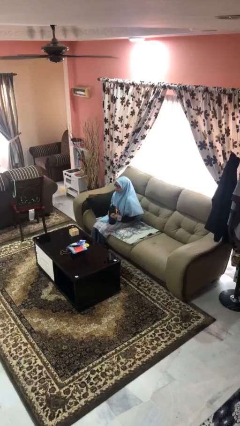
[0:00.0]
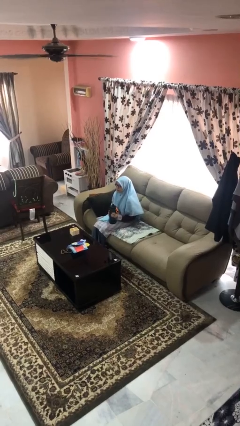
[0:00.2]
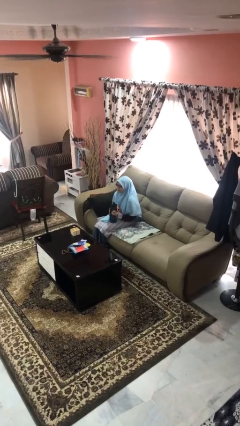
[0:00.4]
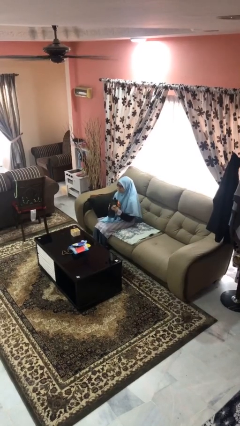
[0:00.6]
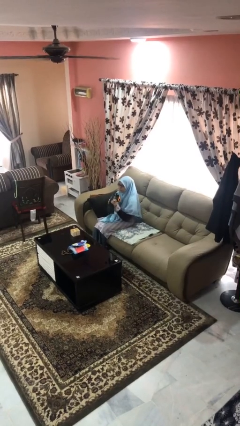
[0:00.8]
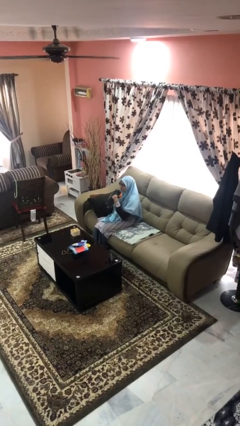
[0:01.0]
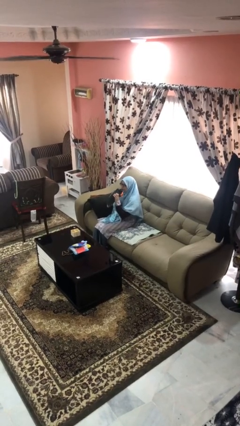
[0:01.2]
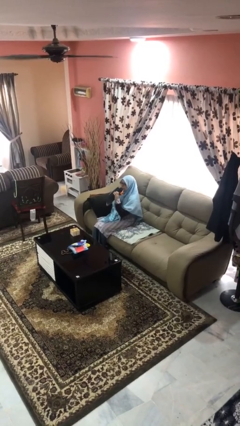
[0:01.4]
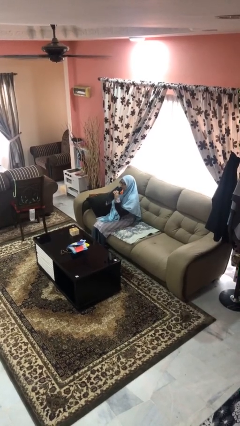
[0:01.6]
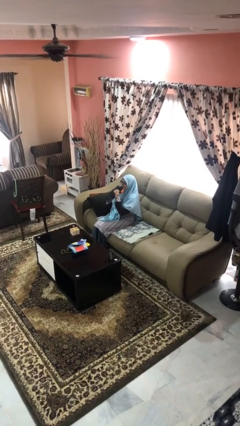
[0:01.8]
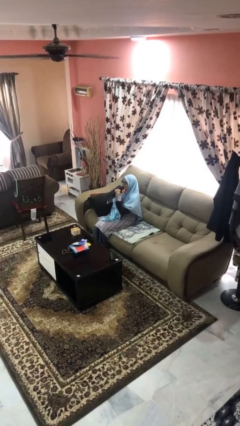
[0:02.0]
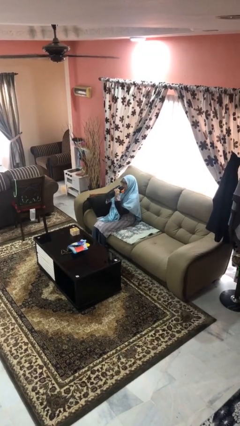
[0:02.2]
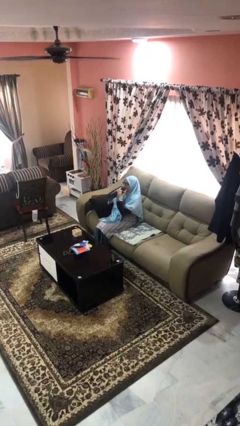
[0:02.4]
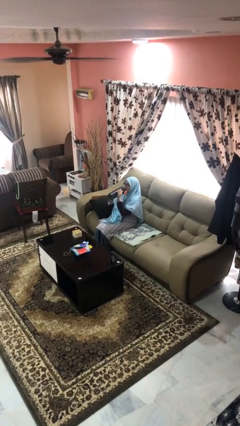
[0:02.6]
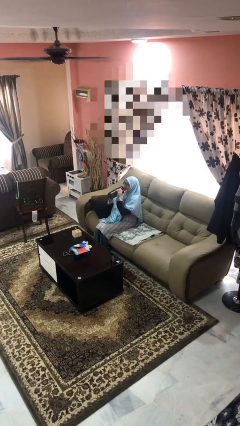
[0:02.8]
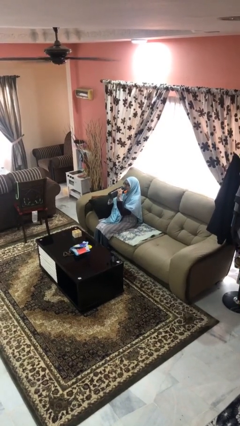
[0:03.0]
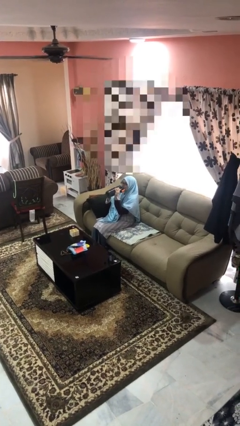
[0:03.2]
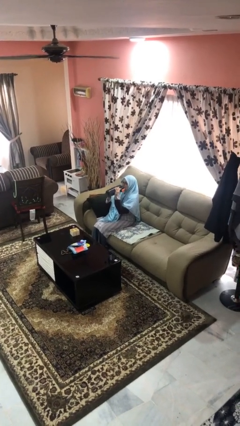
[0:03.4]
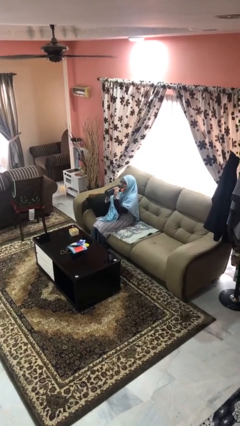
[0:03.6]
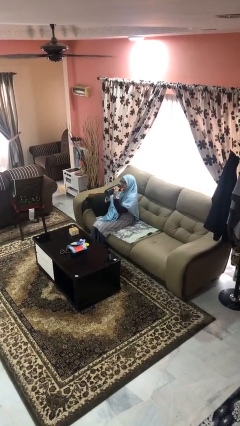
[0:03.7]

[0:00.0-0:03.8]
person drinks from bottle

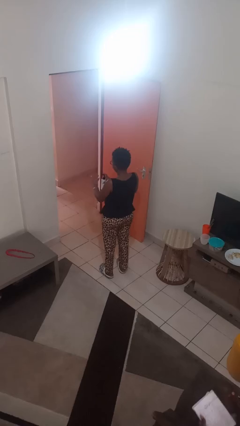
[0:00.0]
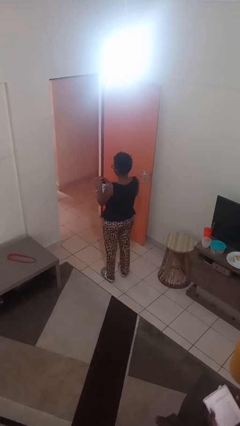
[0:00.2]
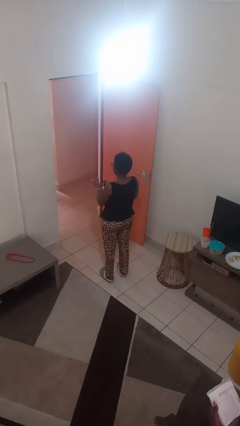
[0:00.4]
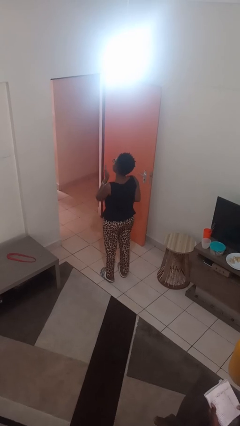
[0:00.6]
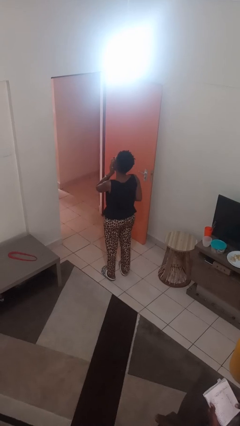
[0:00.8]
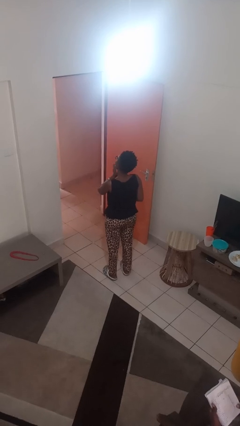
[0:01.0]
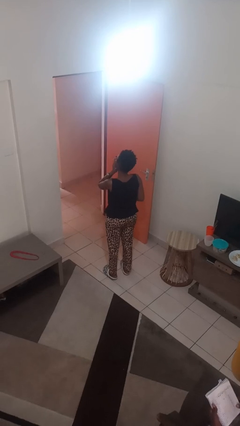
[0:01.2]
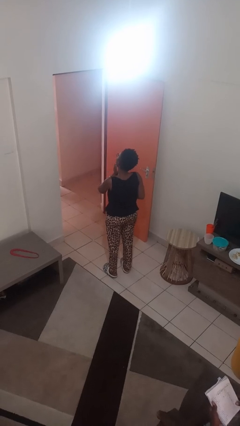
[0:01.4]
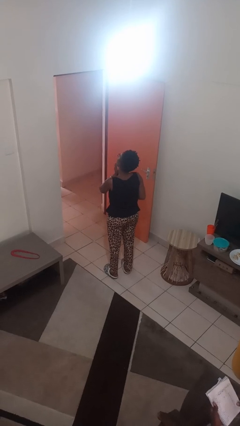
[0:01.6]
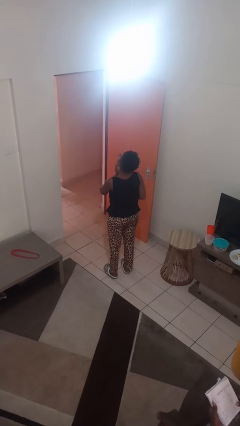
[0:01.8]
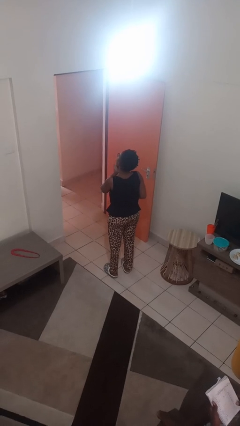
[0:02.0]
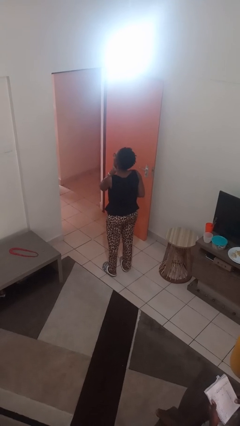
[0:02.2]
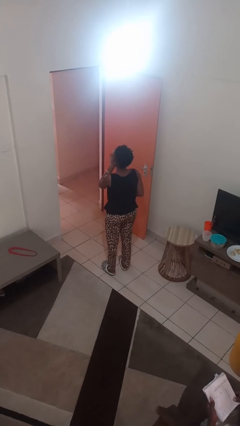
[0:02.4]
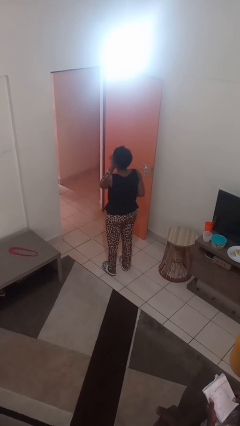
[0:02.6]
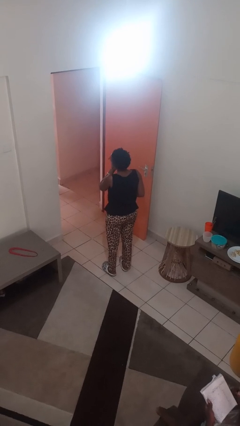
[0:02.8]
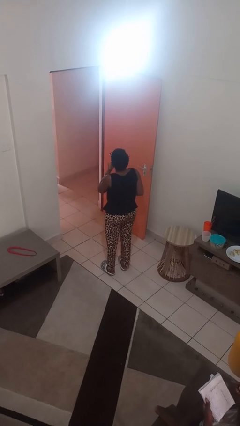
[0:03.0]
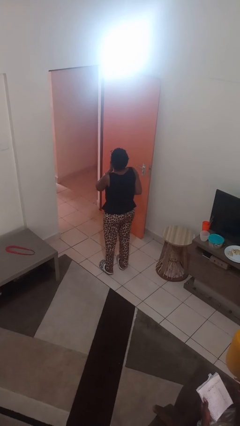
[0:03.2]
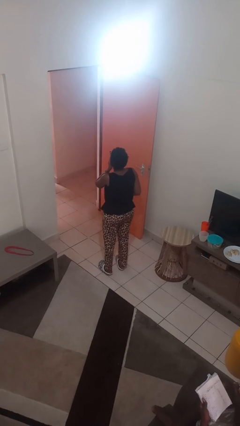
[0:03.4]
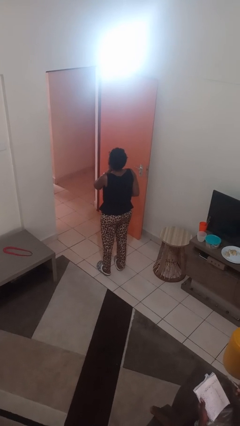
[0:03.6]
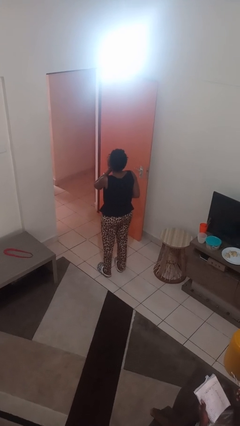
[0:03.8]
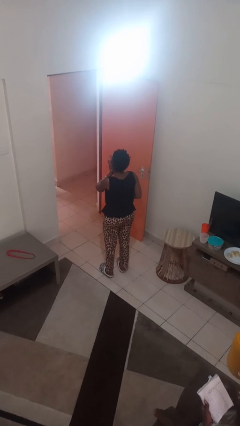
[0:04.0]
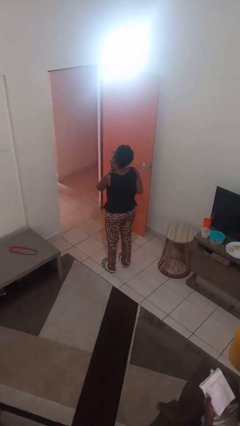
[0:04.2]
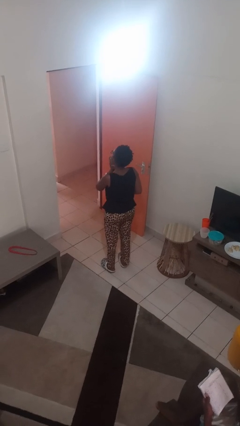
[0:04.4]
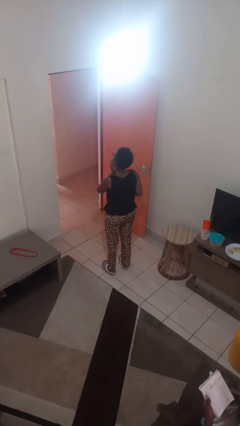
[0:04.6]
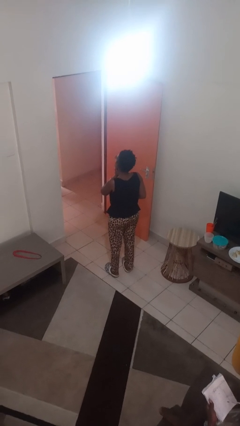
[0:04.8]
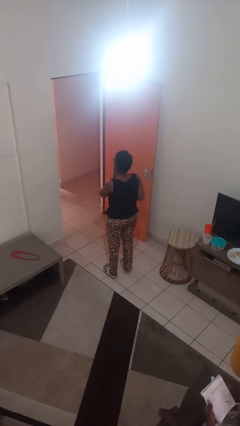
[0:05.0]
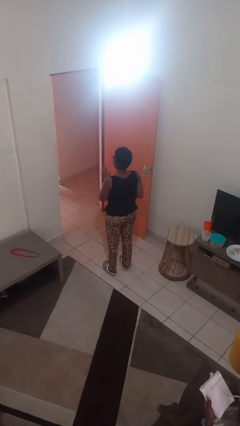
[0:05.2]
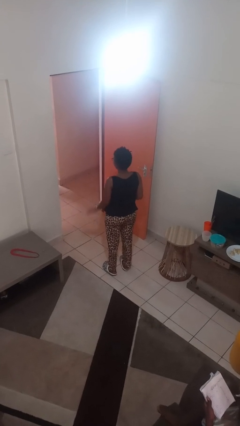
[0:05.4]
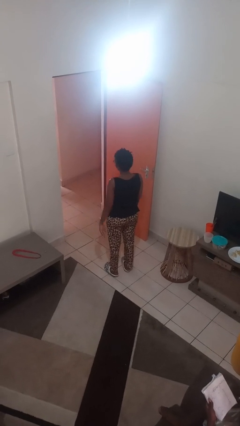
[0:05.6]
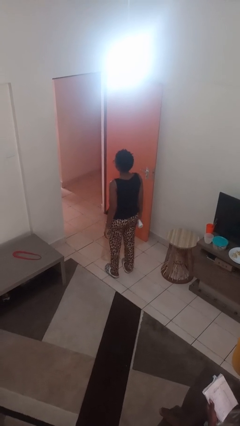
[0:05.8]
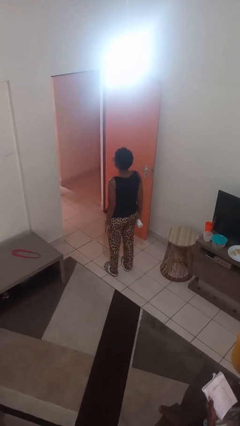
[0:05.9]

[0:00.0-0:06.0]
person applies sunscreen

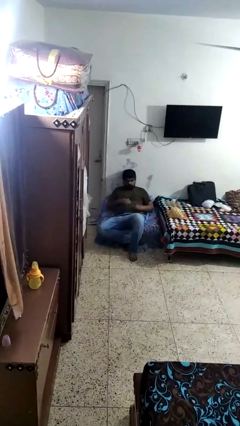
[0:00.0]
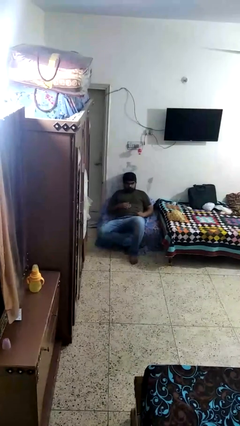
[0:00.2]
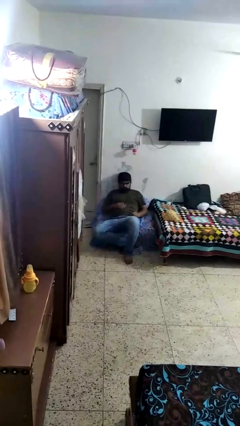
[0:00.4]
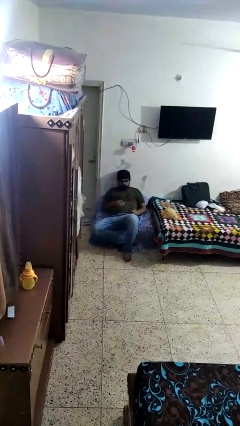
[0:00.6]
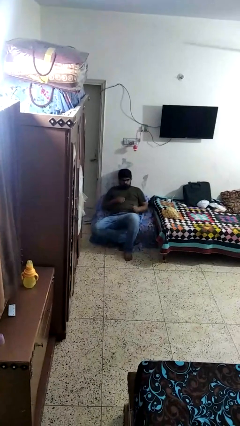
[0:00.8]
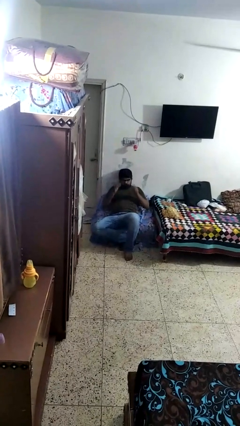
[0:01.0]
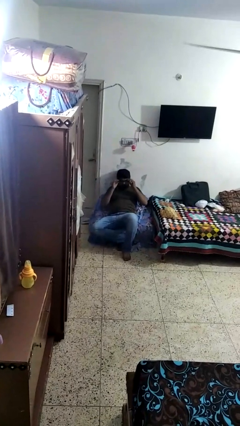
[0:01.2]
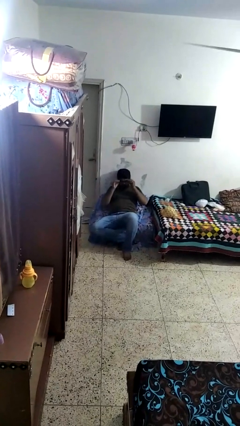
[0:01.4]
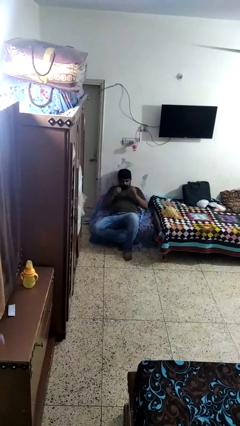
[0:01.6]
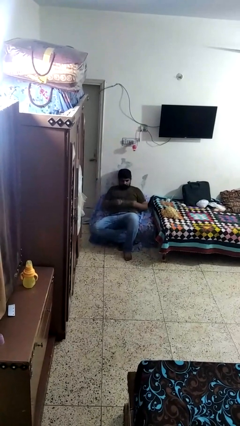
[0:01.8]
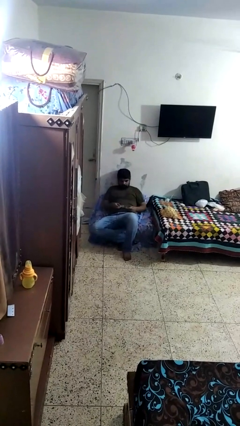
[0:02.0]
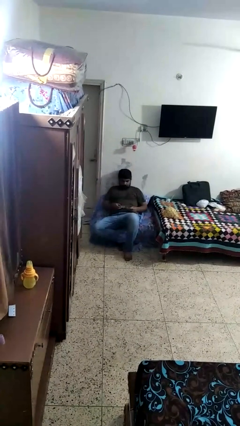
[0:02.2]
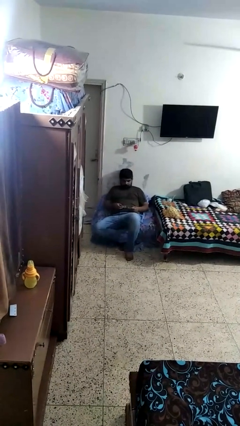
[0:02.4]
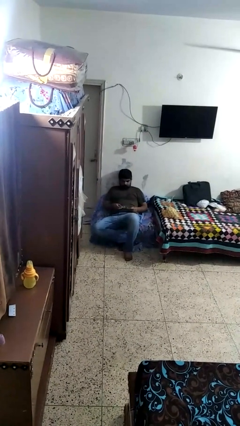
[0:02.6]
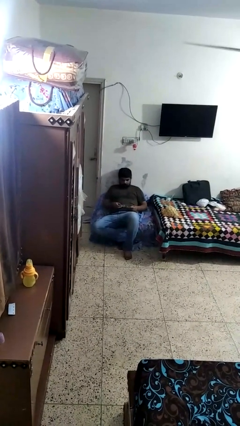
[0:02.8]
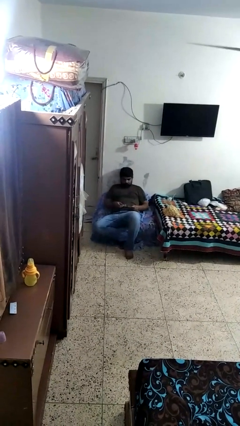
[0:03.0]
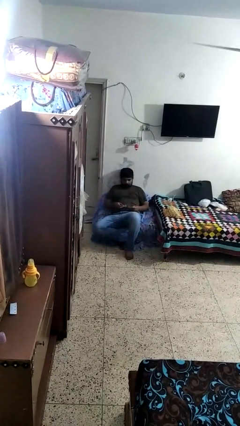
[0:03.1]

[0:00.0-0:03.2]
person takes off glasses

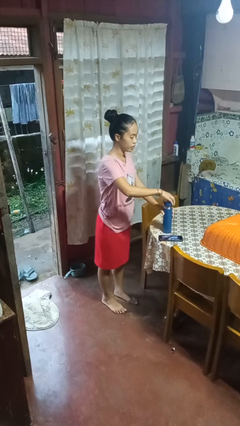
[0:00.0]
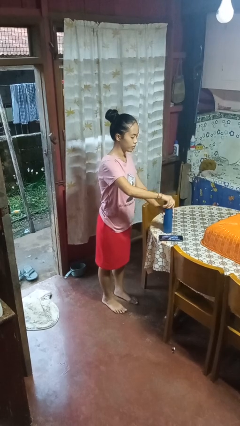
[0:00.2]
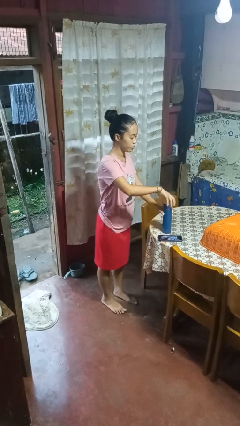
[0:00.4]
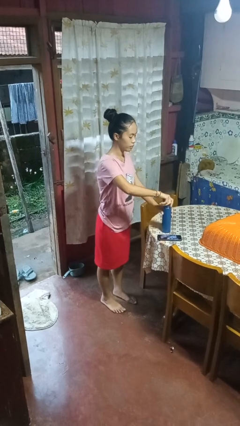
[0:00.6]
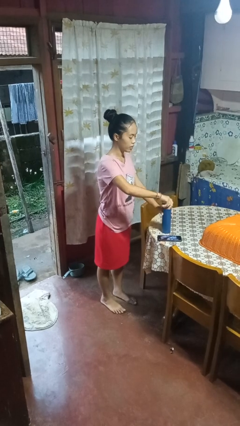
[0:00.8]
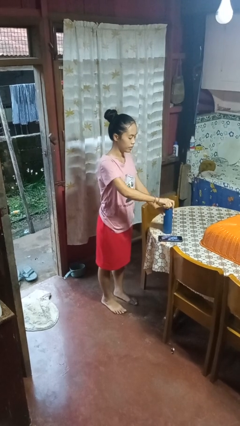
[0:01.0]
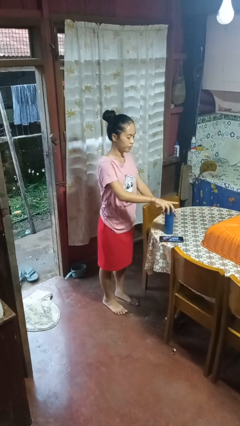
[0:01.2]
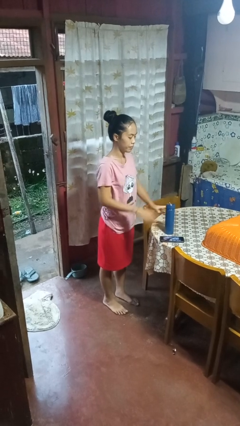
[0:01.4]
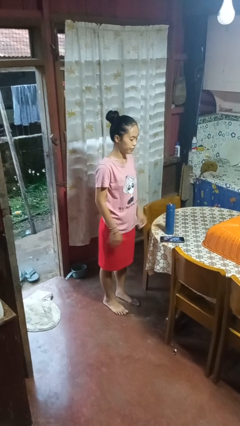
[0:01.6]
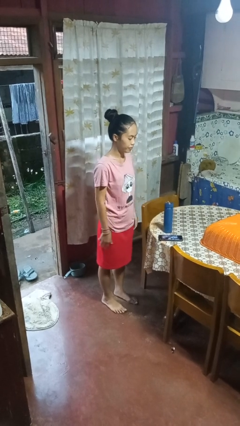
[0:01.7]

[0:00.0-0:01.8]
person closes jar

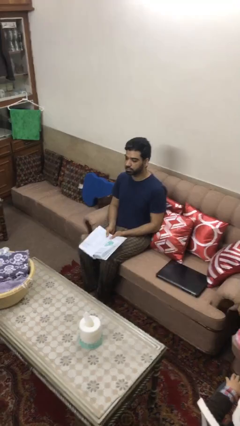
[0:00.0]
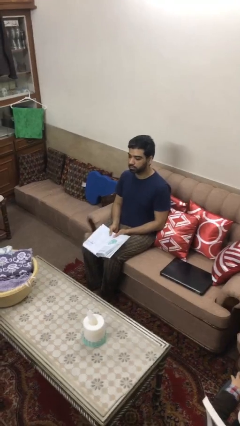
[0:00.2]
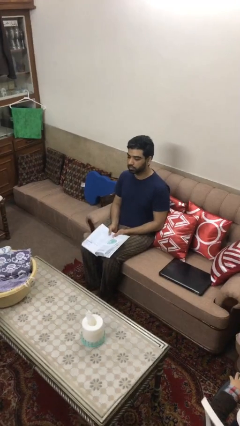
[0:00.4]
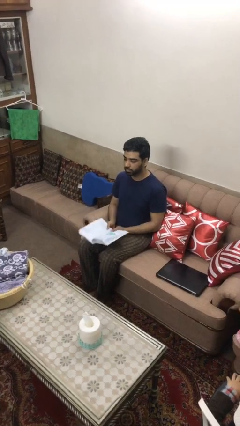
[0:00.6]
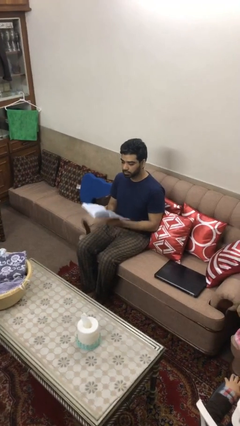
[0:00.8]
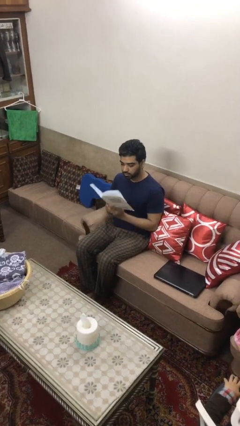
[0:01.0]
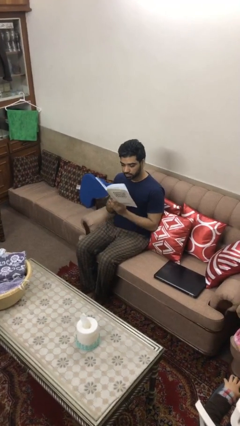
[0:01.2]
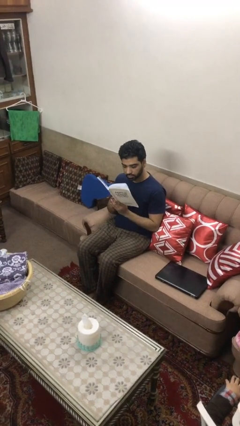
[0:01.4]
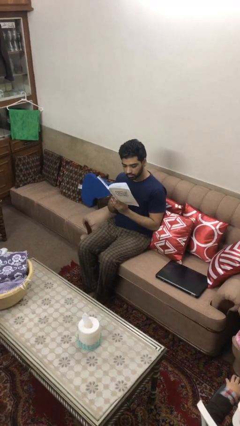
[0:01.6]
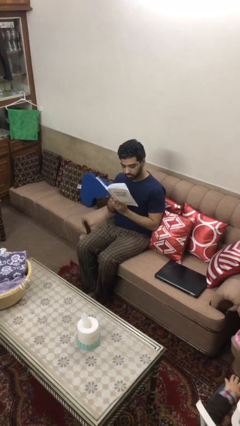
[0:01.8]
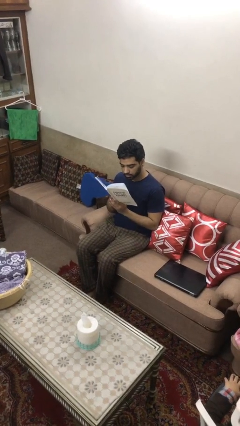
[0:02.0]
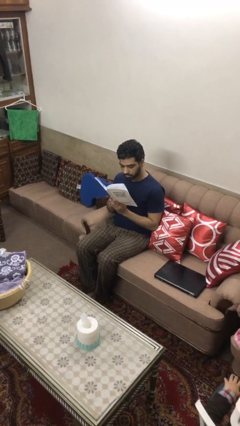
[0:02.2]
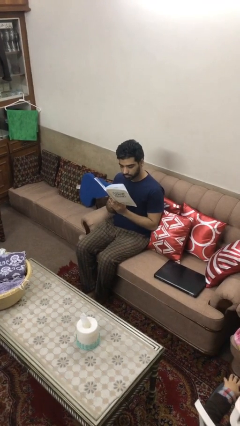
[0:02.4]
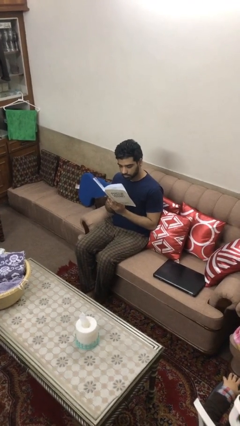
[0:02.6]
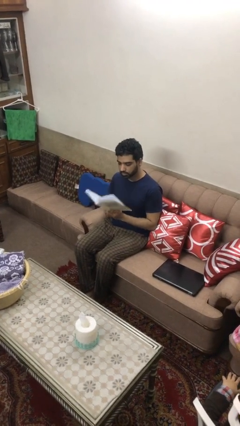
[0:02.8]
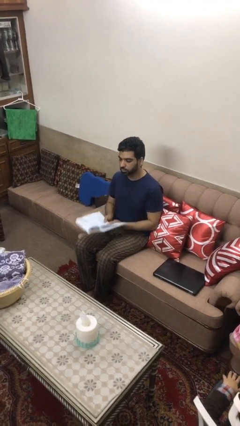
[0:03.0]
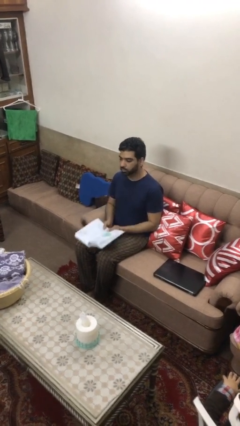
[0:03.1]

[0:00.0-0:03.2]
person reads document
